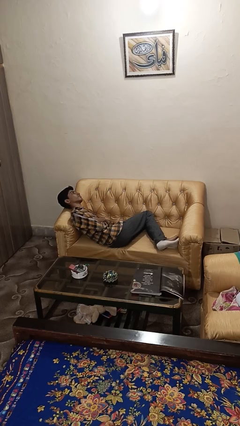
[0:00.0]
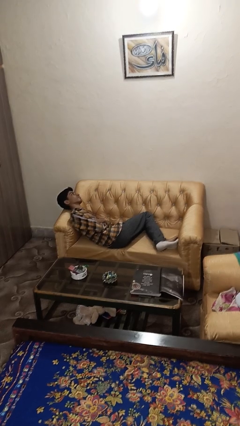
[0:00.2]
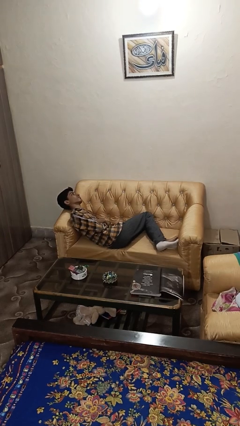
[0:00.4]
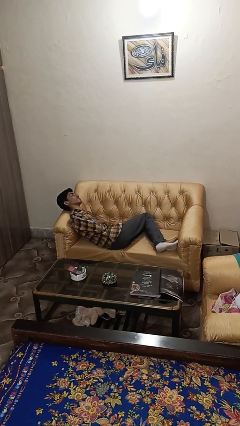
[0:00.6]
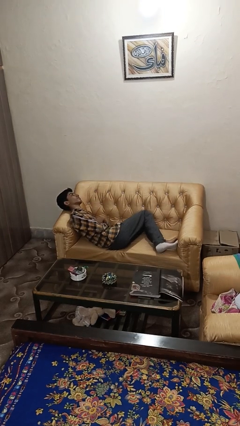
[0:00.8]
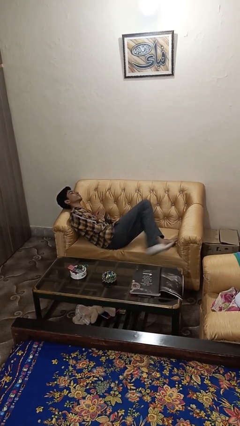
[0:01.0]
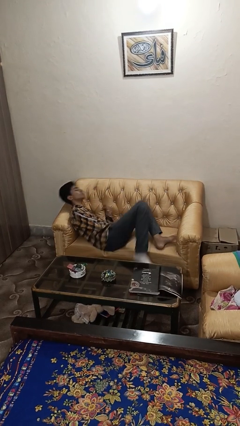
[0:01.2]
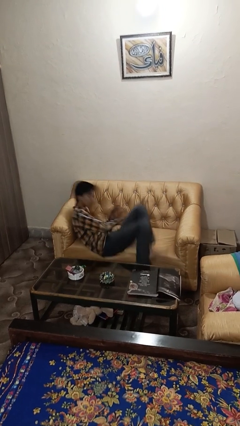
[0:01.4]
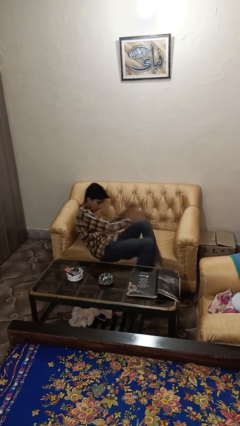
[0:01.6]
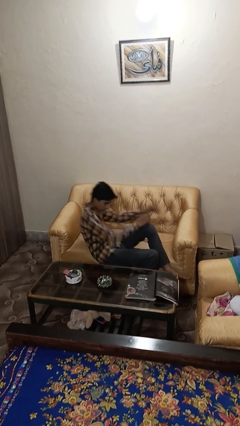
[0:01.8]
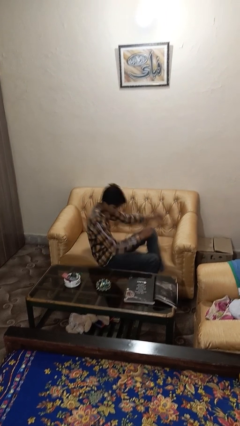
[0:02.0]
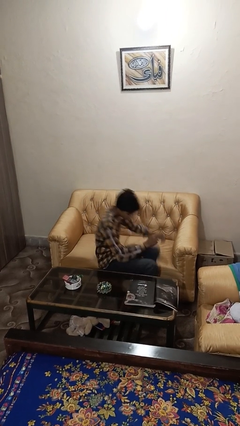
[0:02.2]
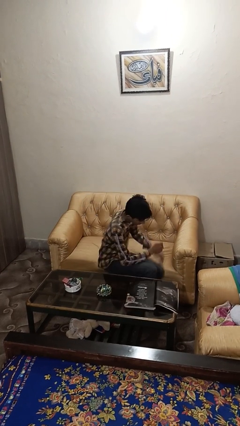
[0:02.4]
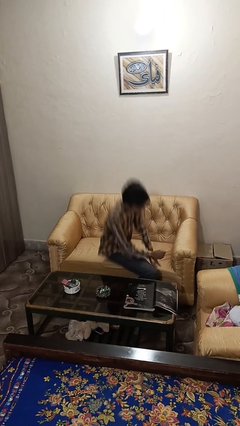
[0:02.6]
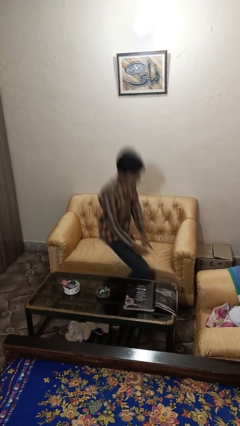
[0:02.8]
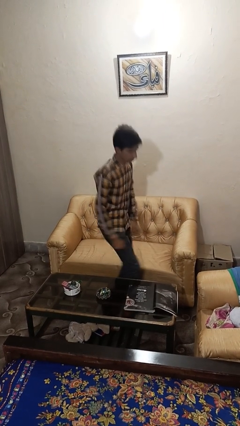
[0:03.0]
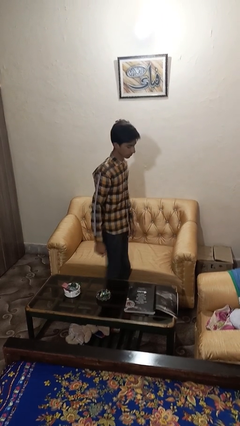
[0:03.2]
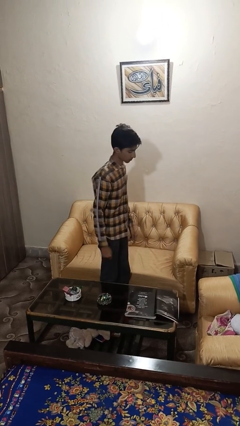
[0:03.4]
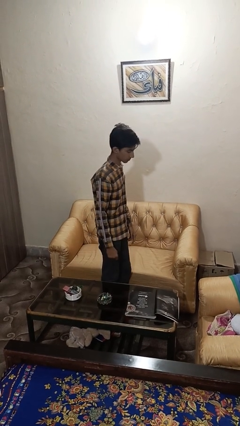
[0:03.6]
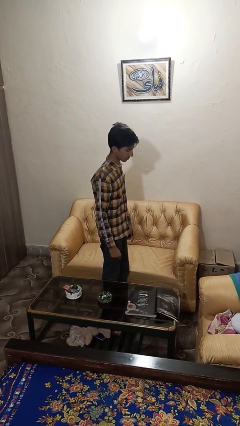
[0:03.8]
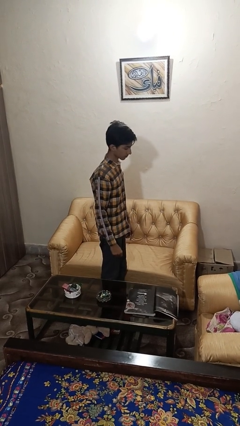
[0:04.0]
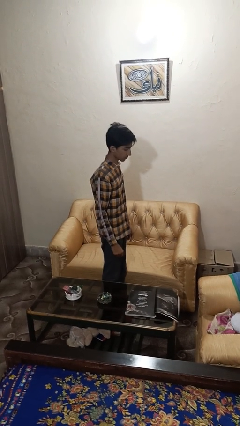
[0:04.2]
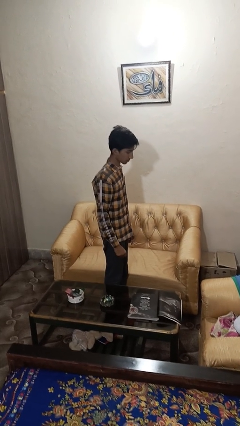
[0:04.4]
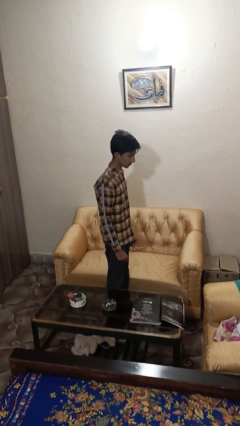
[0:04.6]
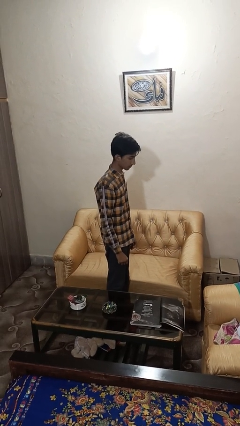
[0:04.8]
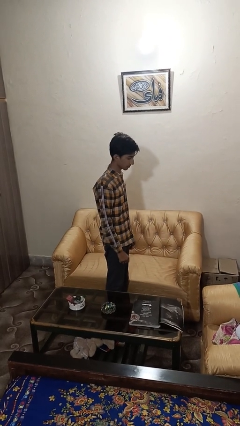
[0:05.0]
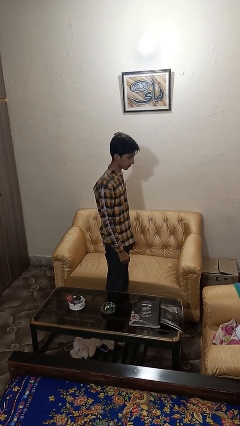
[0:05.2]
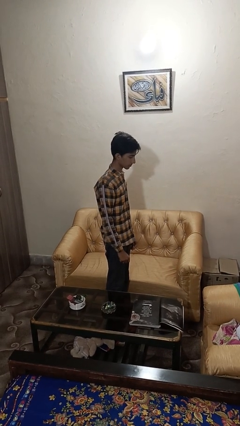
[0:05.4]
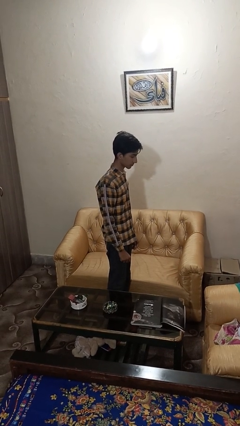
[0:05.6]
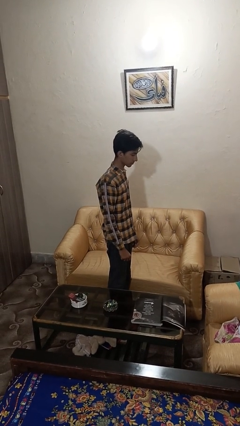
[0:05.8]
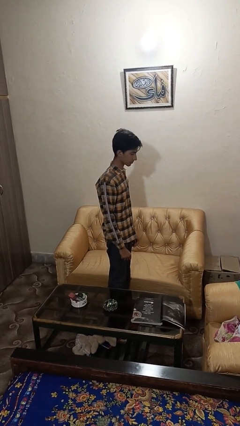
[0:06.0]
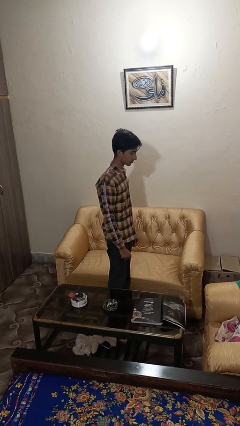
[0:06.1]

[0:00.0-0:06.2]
person stands up

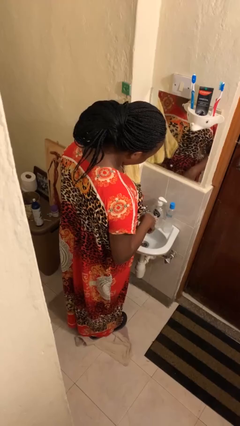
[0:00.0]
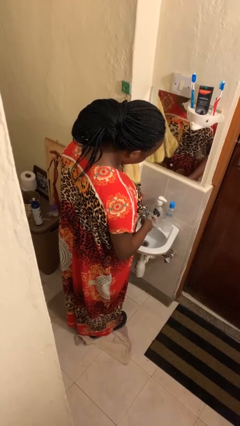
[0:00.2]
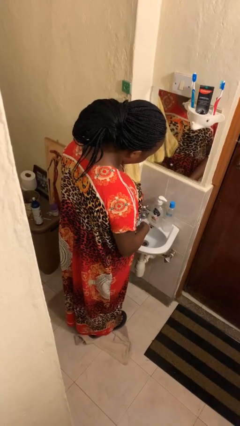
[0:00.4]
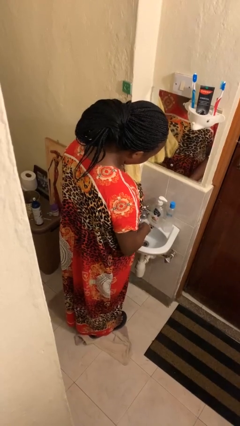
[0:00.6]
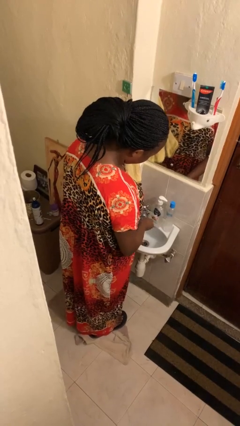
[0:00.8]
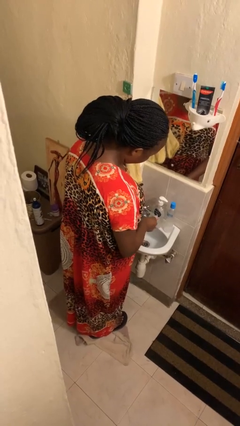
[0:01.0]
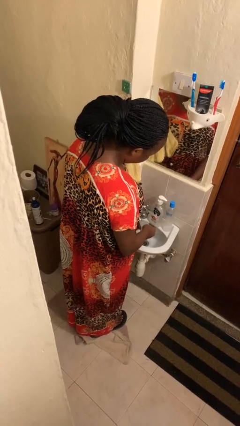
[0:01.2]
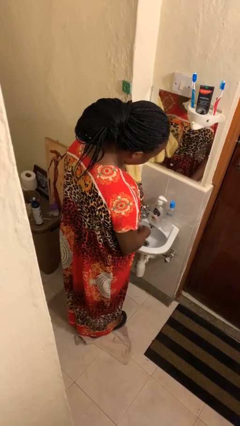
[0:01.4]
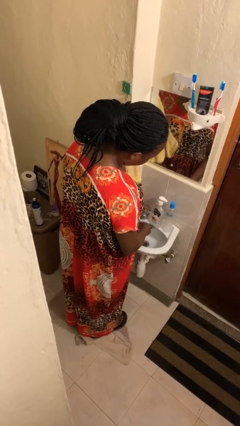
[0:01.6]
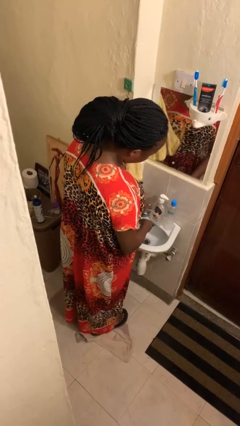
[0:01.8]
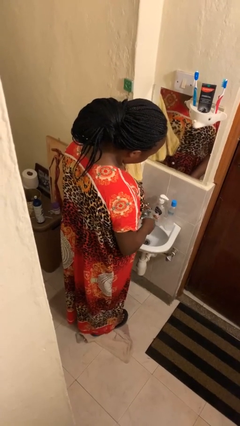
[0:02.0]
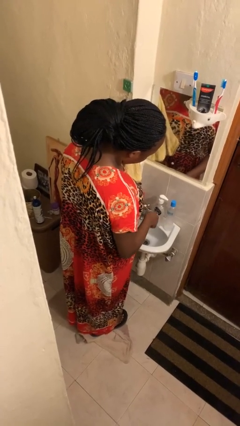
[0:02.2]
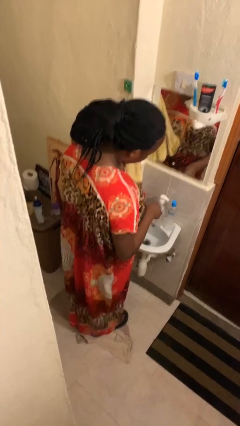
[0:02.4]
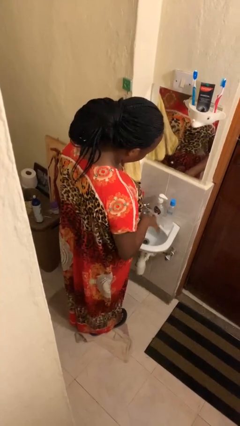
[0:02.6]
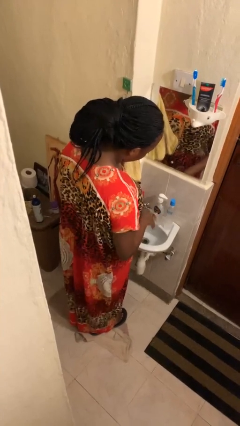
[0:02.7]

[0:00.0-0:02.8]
person washes hands

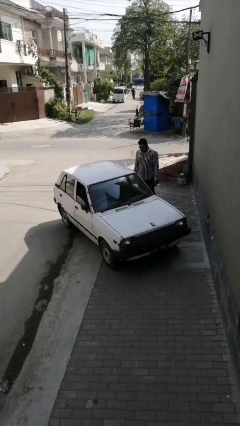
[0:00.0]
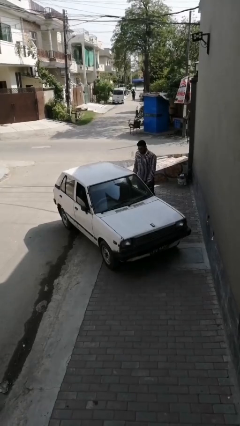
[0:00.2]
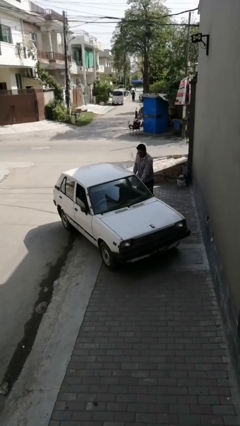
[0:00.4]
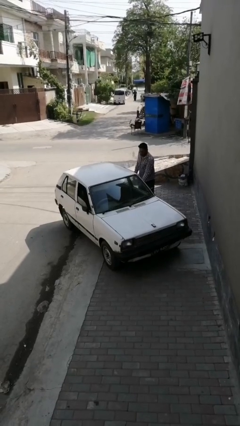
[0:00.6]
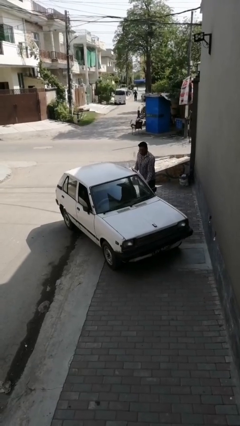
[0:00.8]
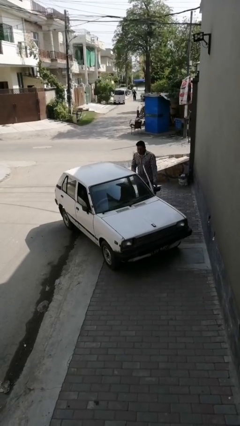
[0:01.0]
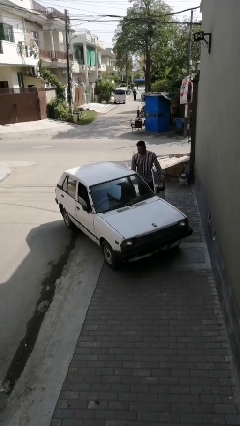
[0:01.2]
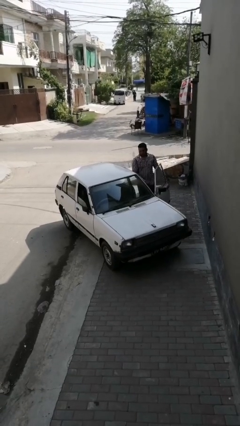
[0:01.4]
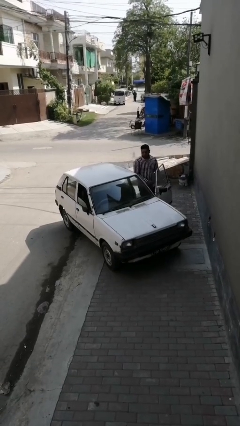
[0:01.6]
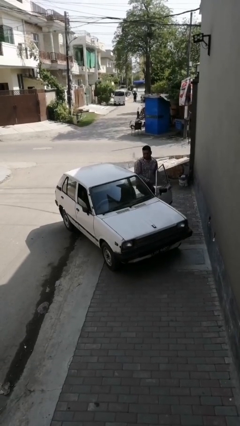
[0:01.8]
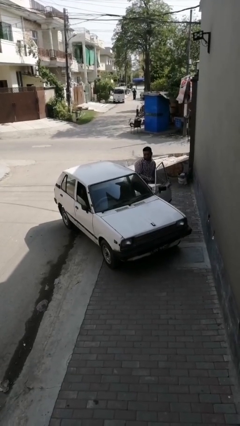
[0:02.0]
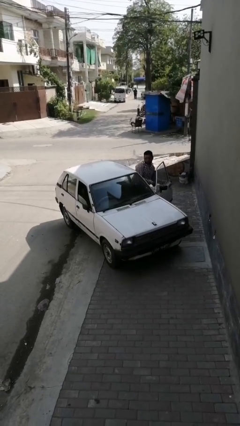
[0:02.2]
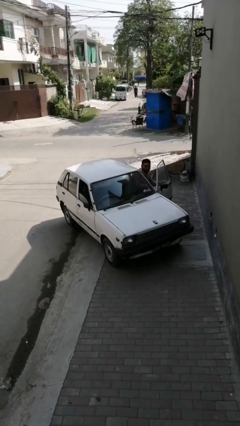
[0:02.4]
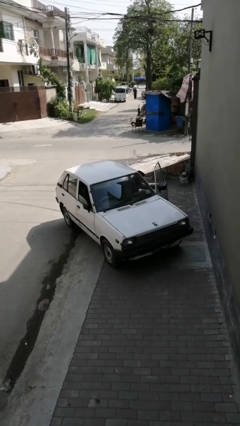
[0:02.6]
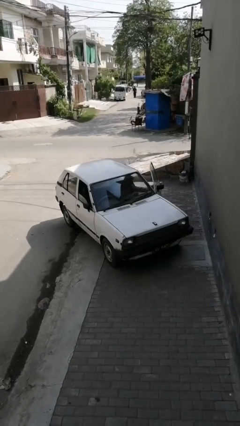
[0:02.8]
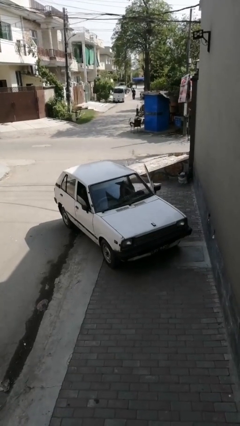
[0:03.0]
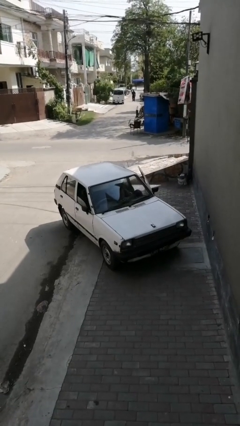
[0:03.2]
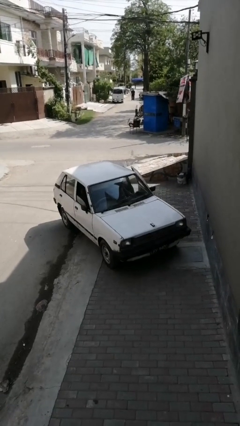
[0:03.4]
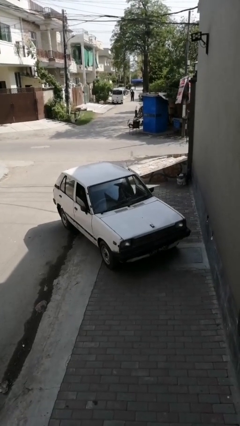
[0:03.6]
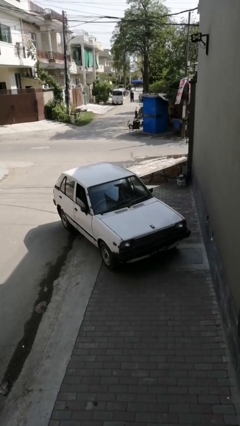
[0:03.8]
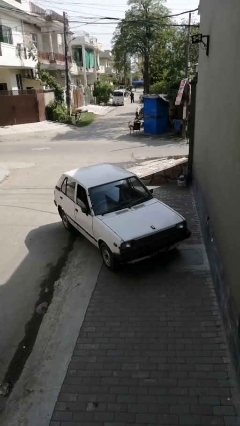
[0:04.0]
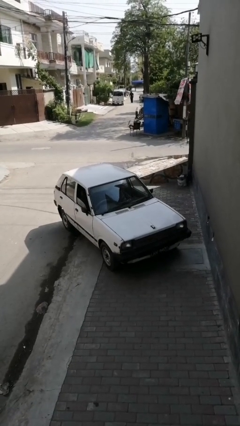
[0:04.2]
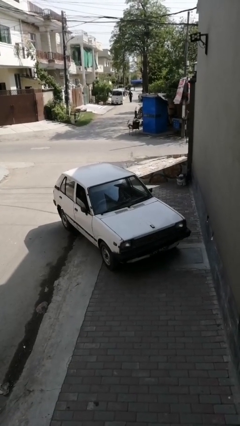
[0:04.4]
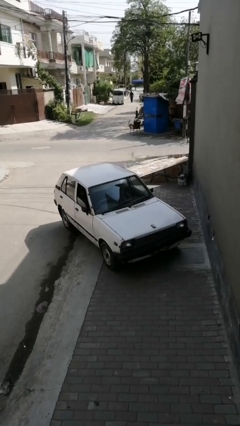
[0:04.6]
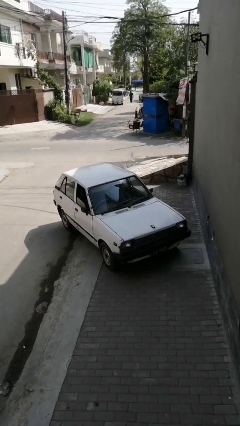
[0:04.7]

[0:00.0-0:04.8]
car picks up person

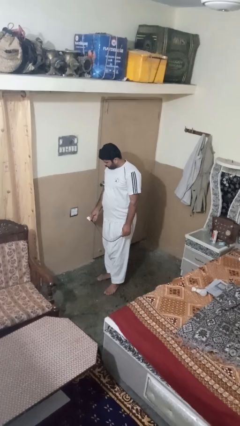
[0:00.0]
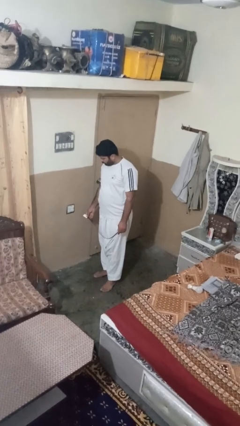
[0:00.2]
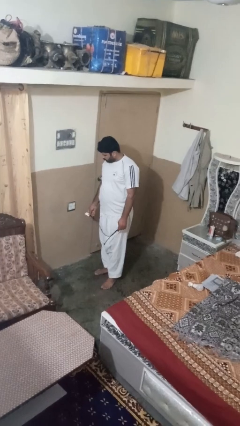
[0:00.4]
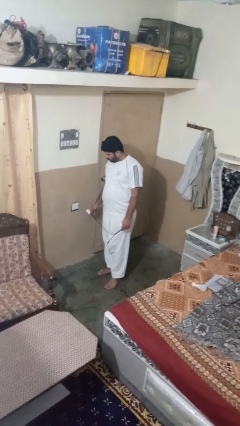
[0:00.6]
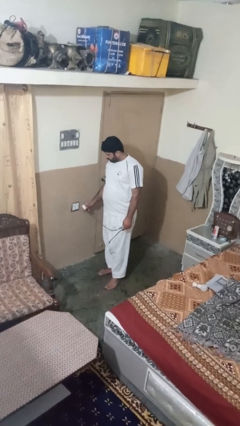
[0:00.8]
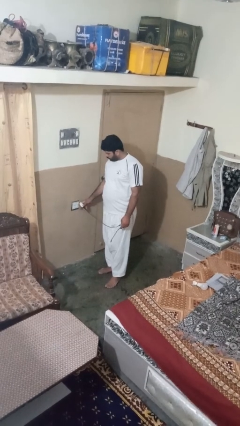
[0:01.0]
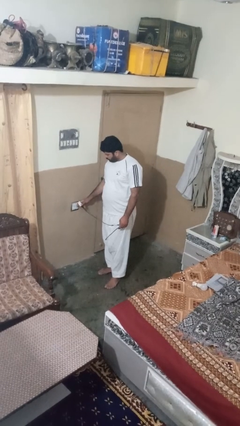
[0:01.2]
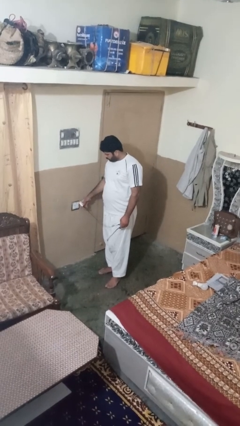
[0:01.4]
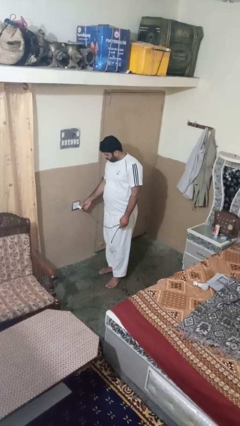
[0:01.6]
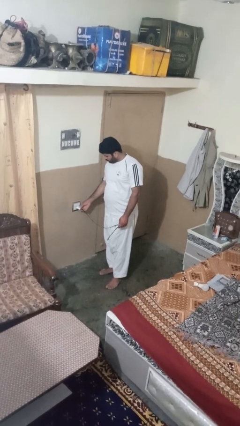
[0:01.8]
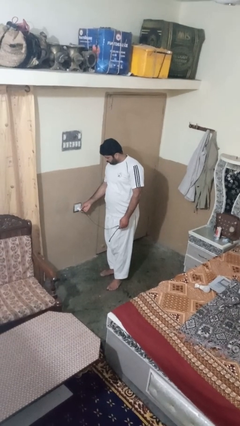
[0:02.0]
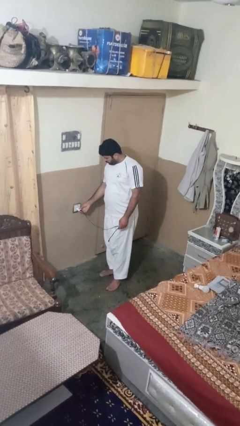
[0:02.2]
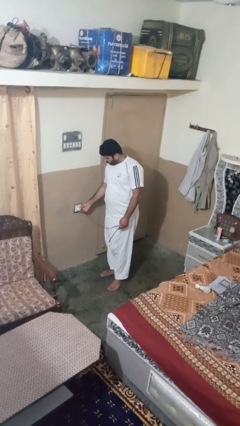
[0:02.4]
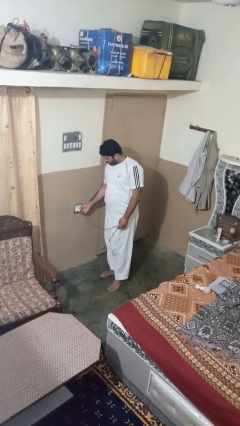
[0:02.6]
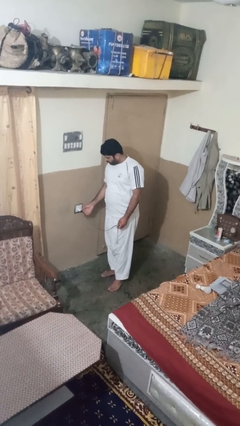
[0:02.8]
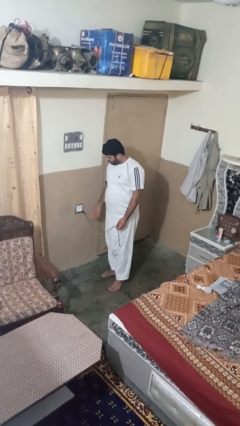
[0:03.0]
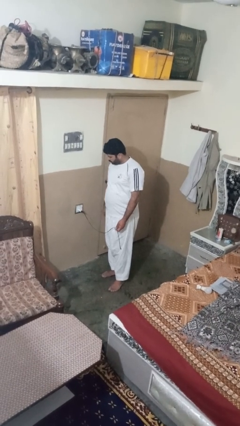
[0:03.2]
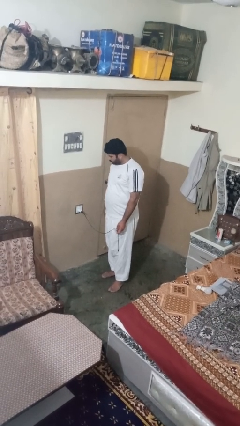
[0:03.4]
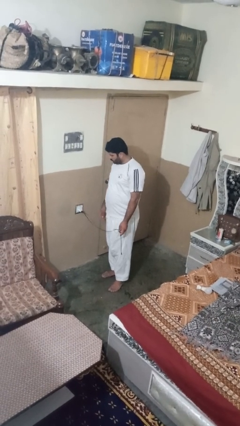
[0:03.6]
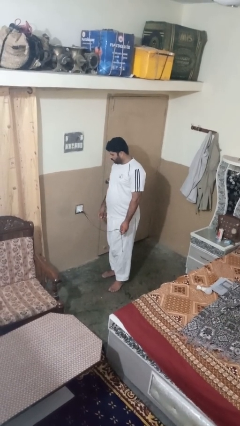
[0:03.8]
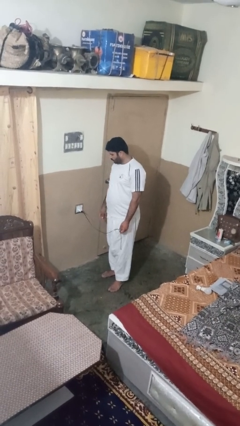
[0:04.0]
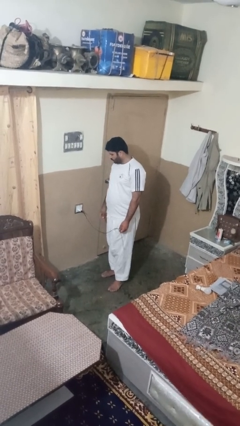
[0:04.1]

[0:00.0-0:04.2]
person plugs into electrical socket
